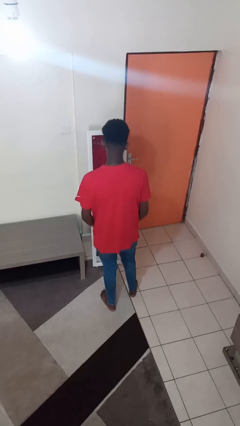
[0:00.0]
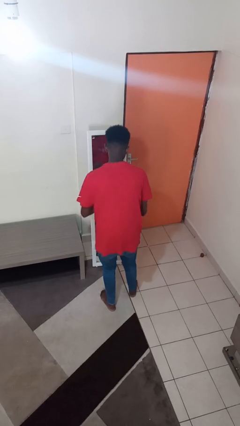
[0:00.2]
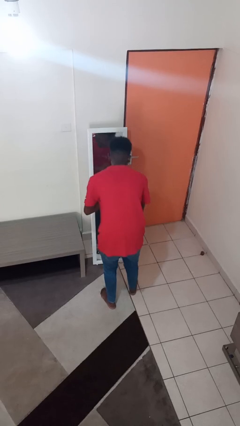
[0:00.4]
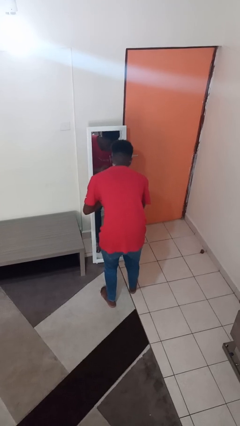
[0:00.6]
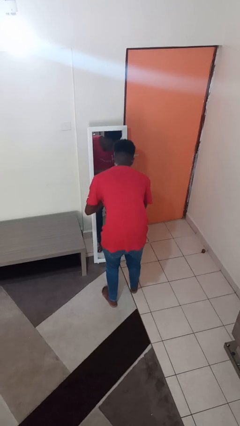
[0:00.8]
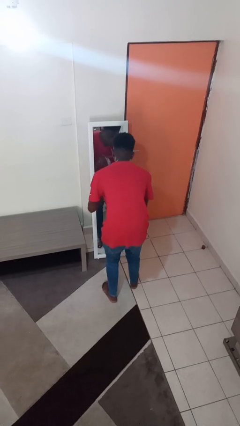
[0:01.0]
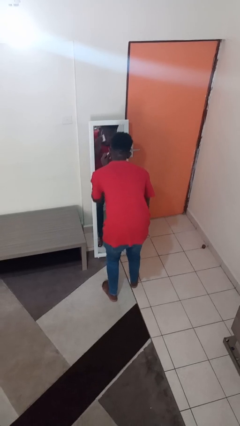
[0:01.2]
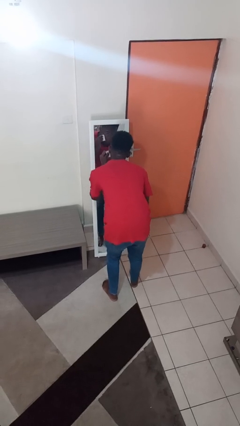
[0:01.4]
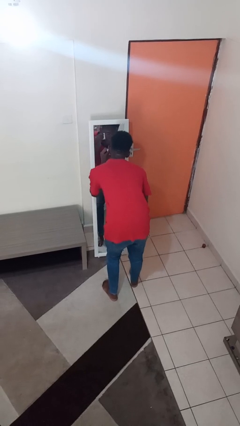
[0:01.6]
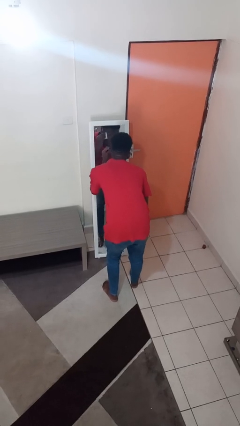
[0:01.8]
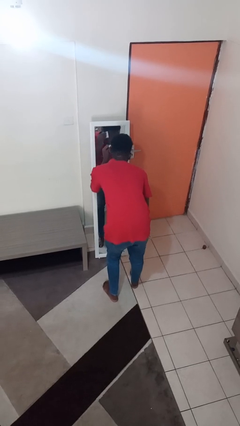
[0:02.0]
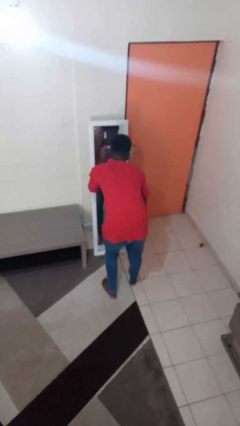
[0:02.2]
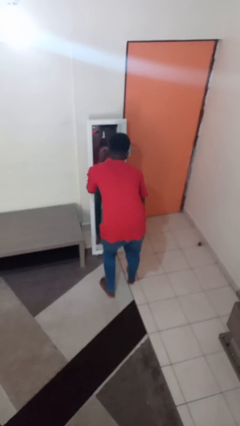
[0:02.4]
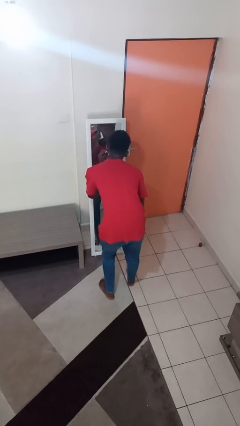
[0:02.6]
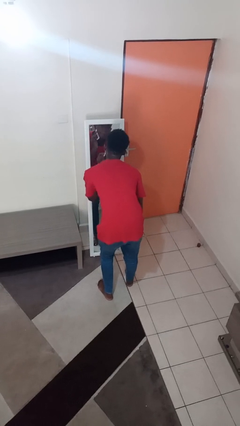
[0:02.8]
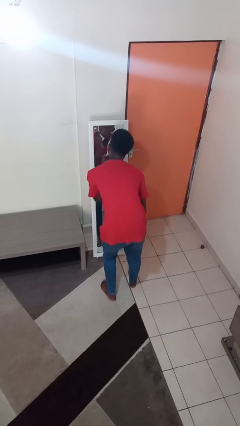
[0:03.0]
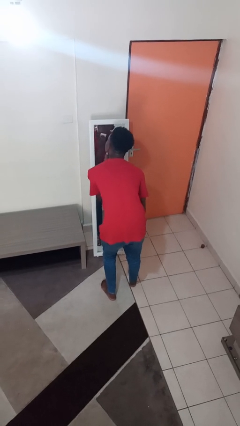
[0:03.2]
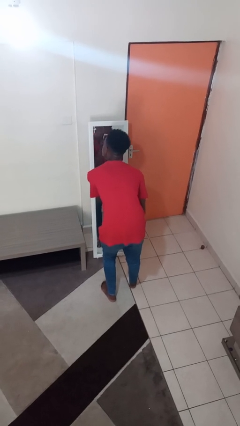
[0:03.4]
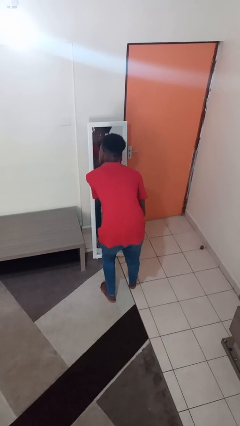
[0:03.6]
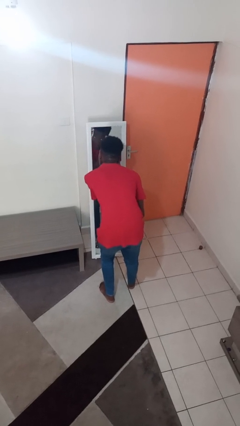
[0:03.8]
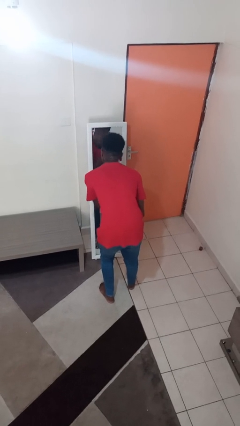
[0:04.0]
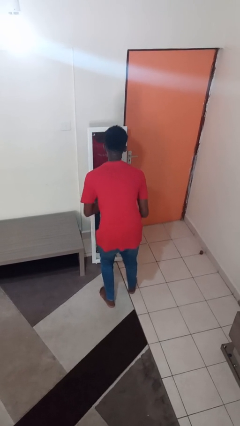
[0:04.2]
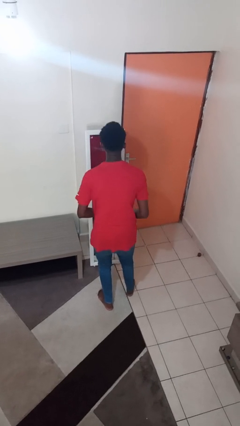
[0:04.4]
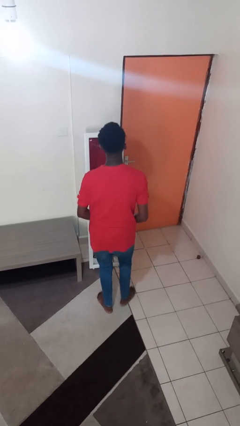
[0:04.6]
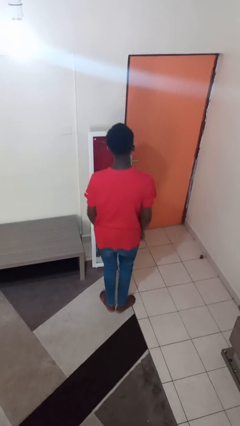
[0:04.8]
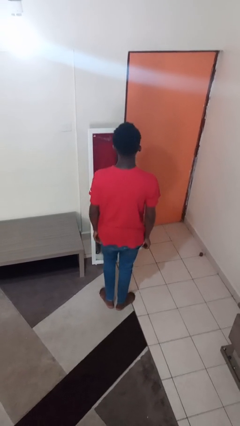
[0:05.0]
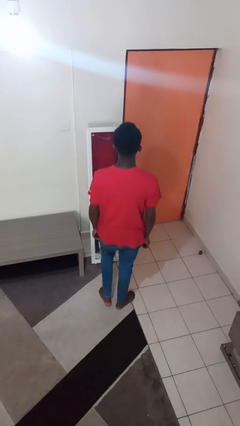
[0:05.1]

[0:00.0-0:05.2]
person applies foundation makeup

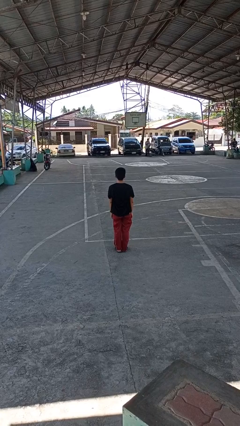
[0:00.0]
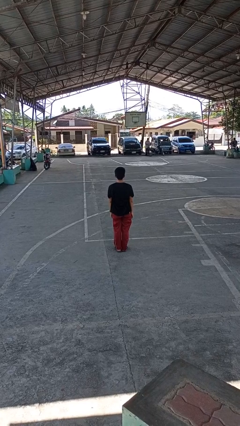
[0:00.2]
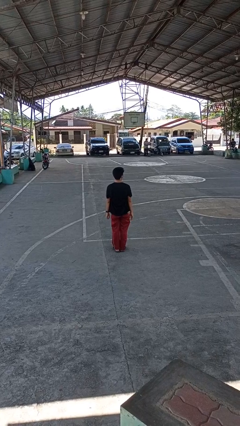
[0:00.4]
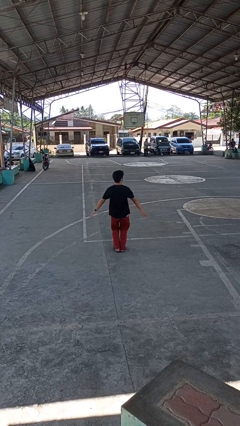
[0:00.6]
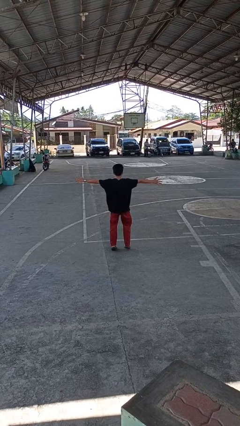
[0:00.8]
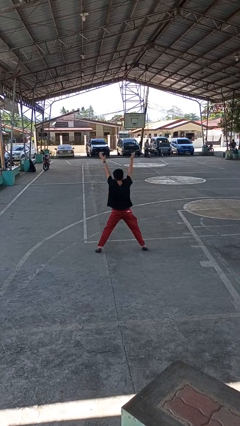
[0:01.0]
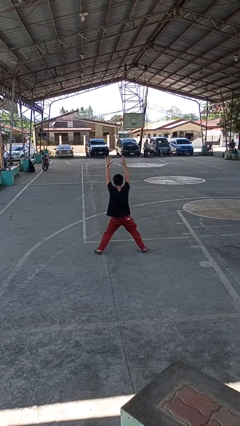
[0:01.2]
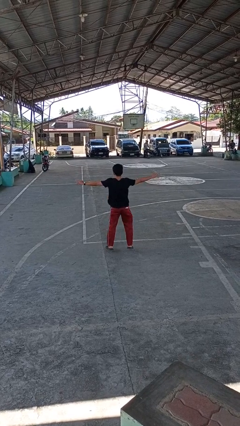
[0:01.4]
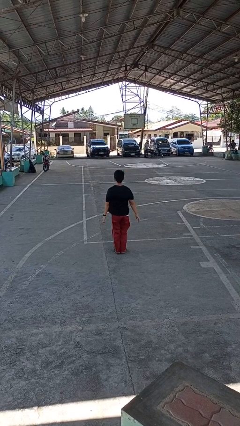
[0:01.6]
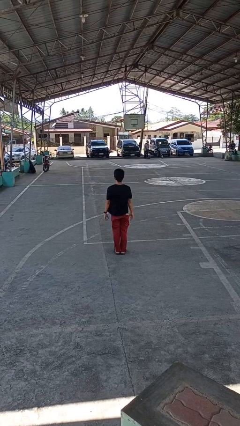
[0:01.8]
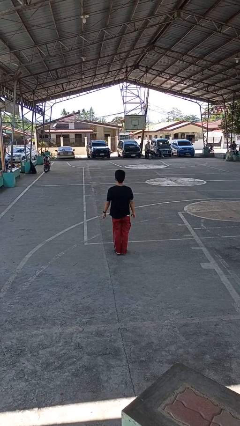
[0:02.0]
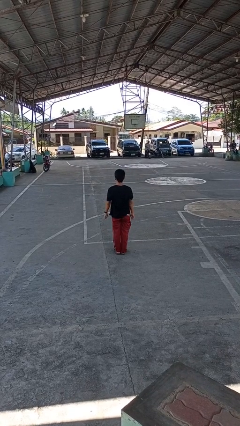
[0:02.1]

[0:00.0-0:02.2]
person exercises with jumping jacks

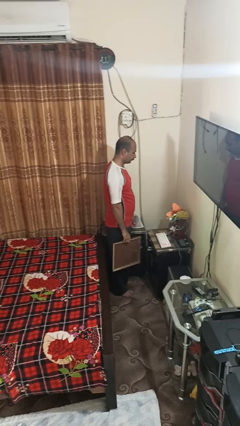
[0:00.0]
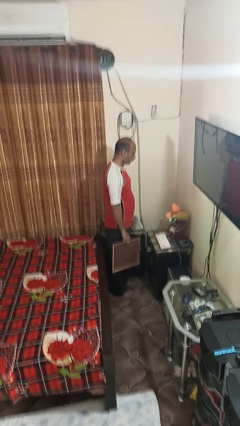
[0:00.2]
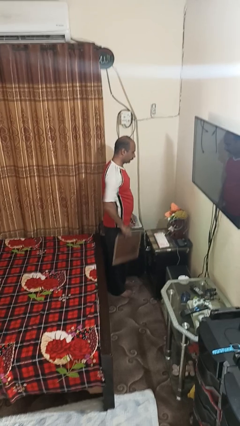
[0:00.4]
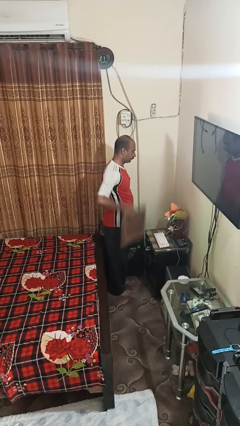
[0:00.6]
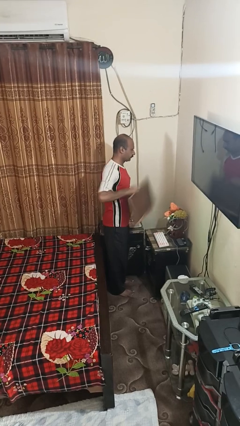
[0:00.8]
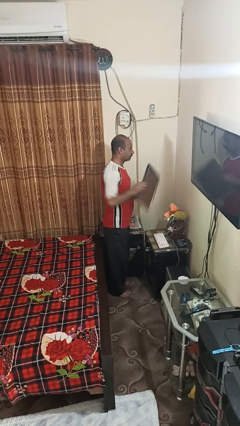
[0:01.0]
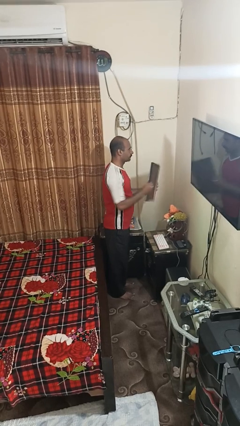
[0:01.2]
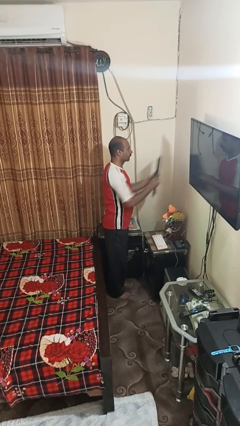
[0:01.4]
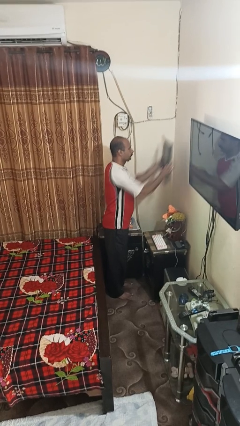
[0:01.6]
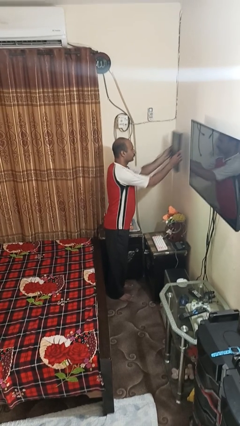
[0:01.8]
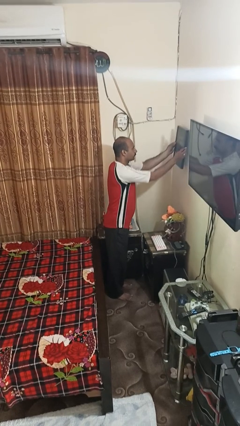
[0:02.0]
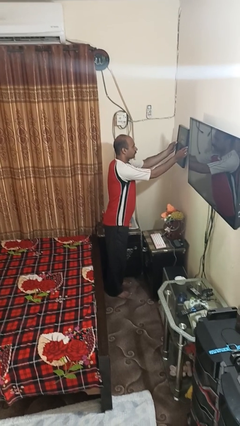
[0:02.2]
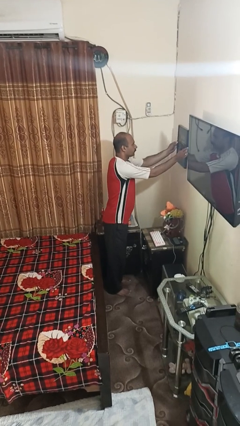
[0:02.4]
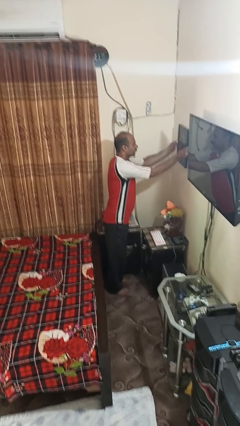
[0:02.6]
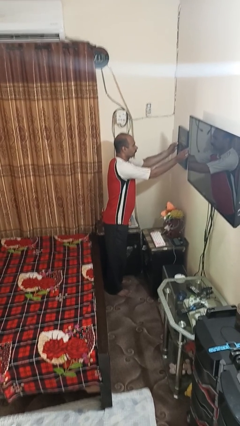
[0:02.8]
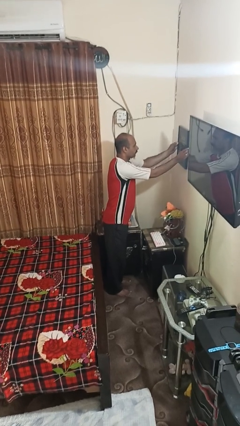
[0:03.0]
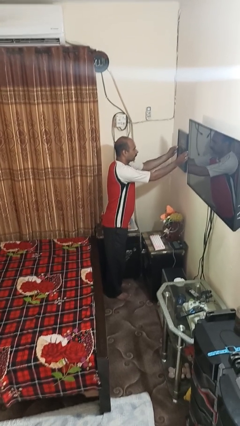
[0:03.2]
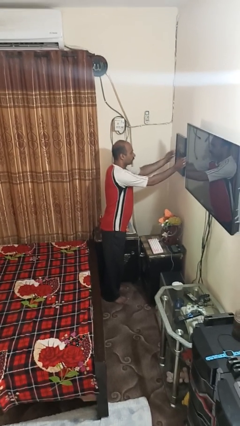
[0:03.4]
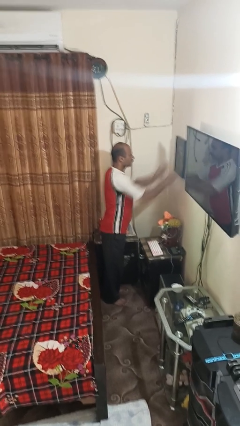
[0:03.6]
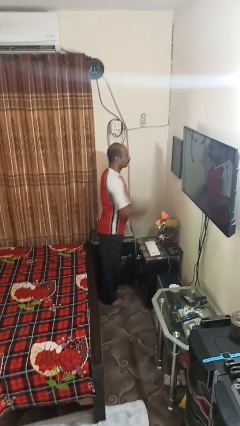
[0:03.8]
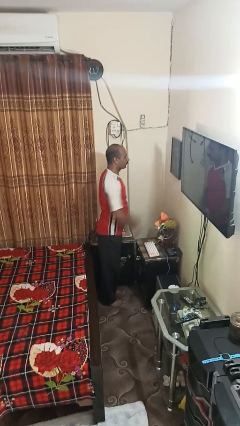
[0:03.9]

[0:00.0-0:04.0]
person puts up picture frame

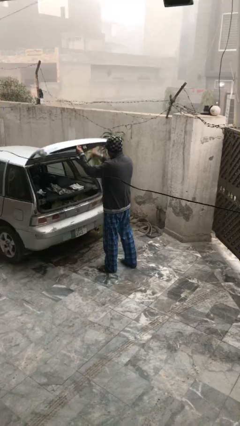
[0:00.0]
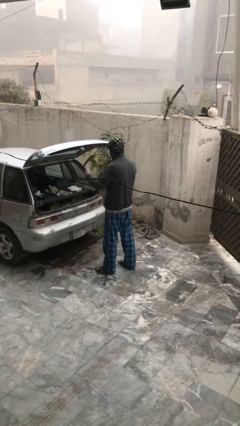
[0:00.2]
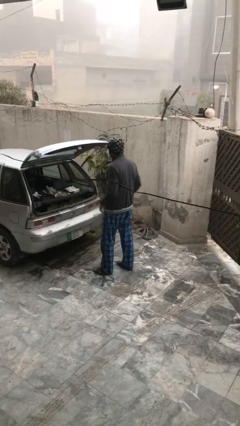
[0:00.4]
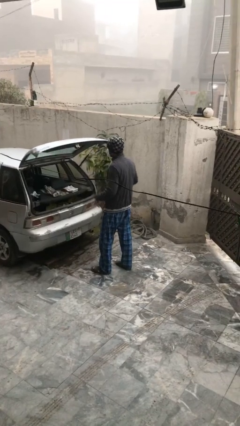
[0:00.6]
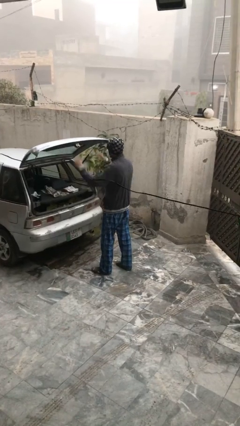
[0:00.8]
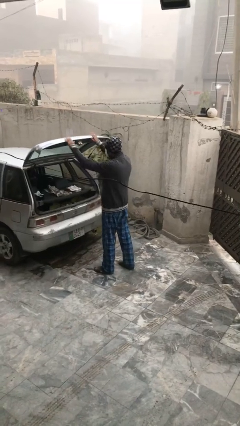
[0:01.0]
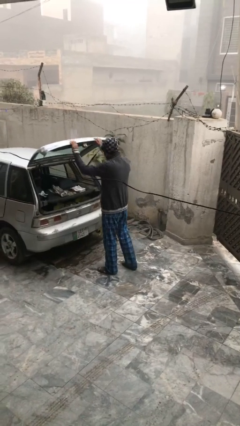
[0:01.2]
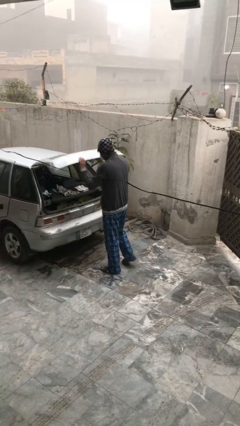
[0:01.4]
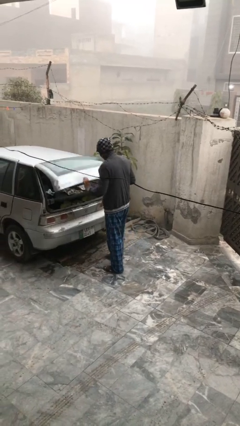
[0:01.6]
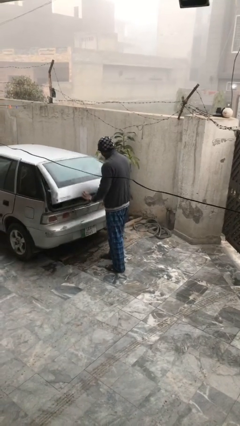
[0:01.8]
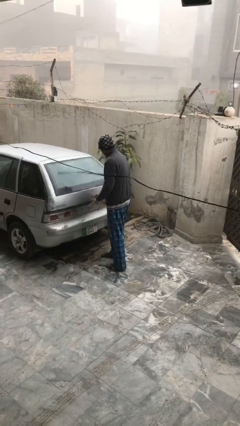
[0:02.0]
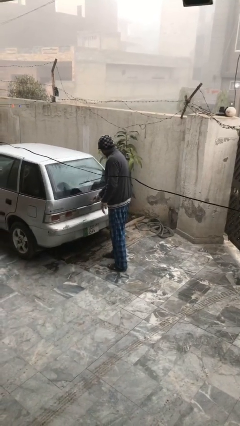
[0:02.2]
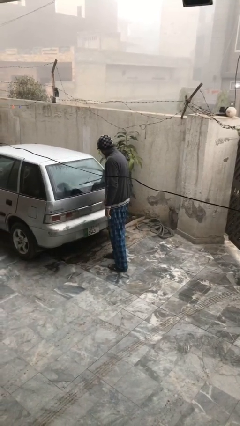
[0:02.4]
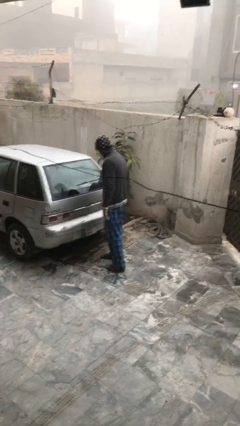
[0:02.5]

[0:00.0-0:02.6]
person closes car trunk

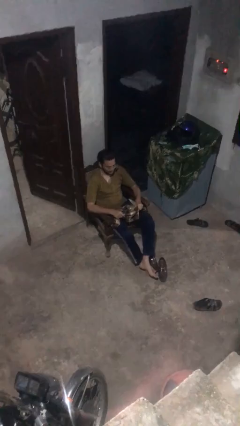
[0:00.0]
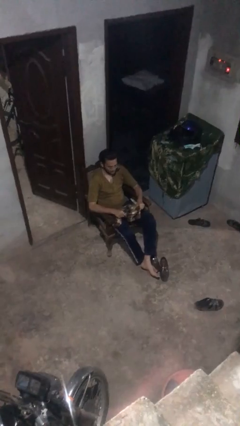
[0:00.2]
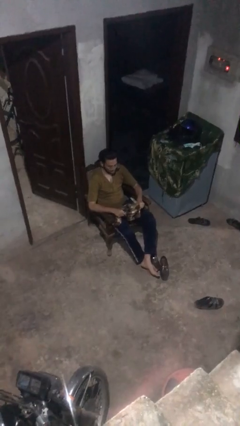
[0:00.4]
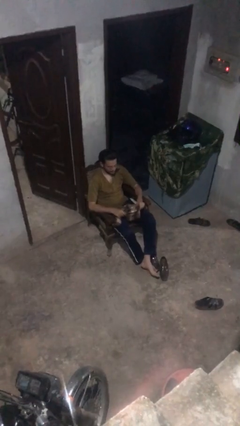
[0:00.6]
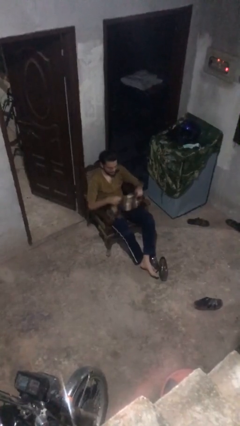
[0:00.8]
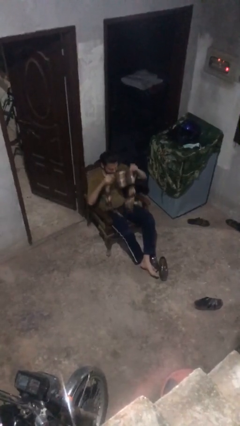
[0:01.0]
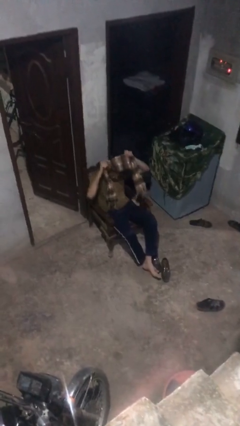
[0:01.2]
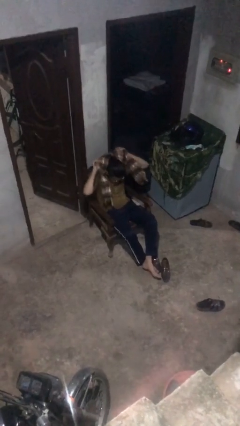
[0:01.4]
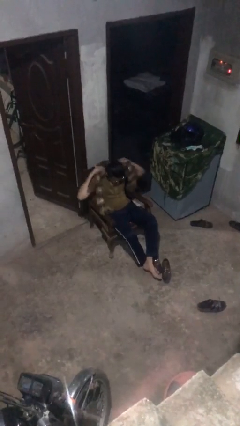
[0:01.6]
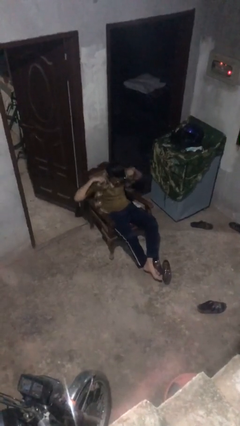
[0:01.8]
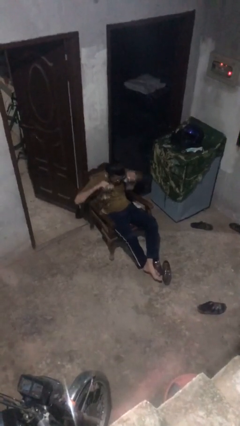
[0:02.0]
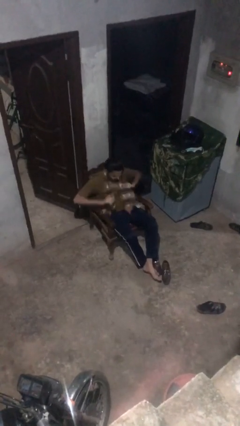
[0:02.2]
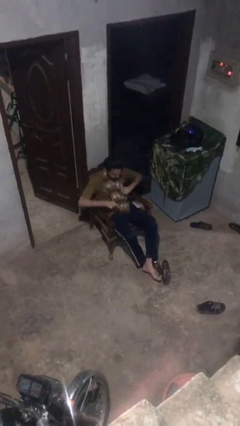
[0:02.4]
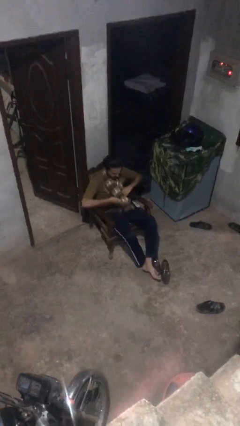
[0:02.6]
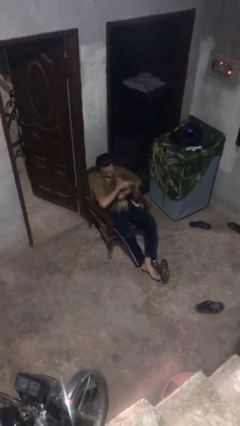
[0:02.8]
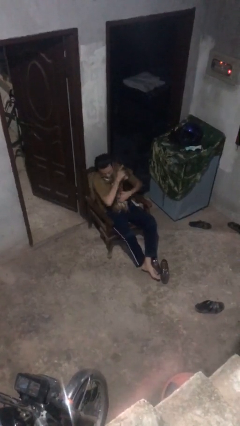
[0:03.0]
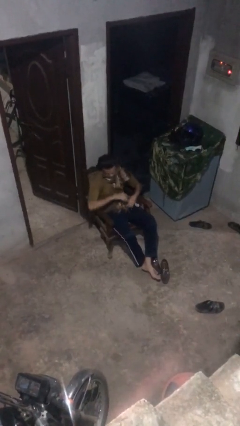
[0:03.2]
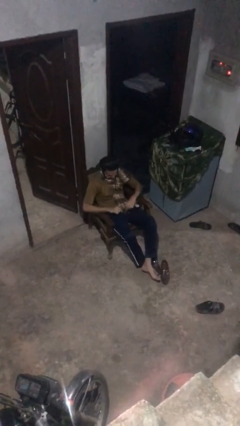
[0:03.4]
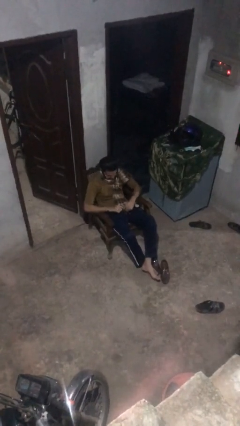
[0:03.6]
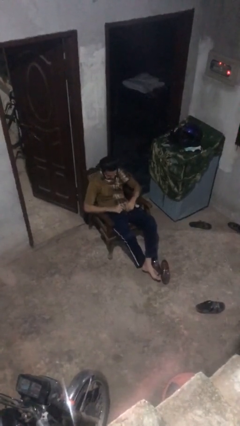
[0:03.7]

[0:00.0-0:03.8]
person puts on scarf
